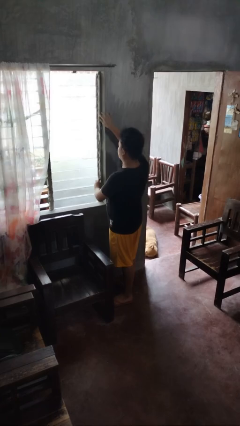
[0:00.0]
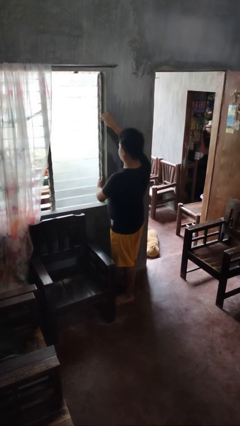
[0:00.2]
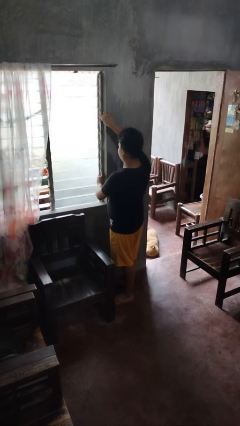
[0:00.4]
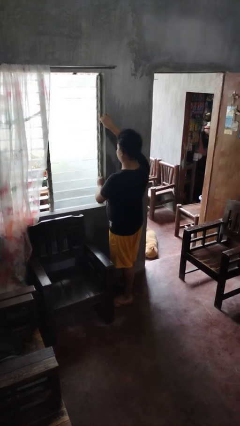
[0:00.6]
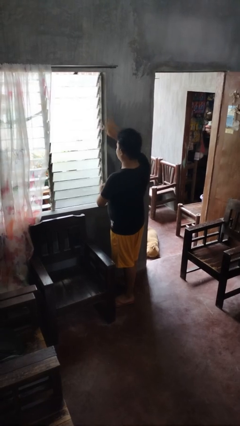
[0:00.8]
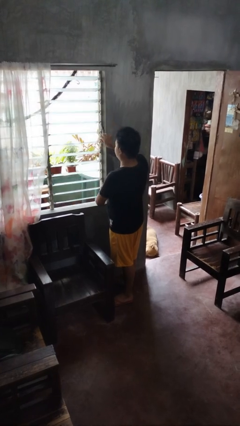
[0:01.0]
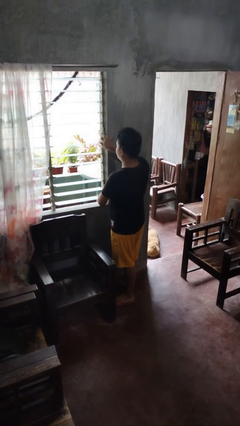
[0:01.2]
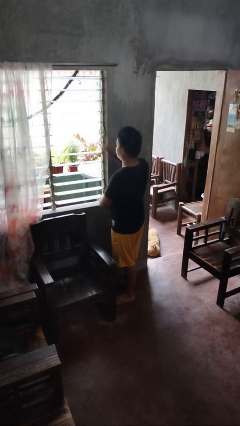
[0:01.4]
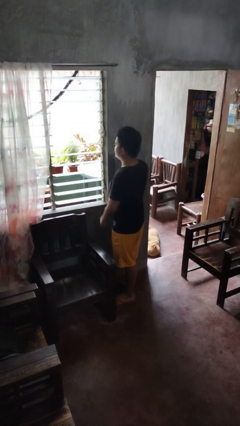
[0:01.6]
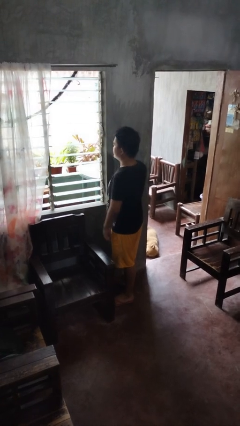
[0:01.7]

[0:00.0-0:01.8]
person opens home window

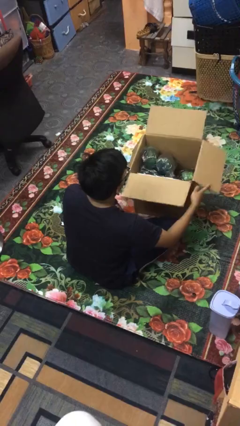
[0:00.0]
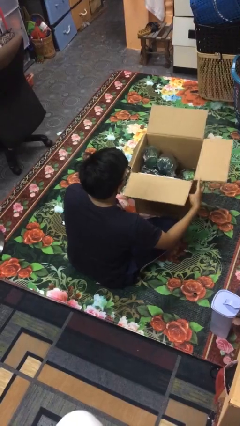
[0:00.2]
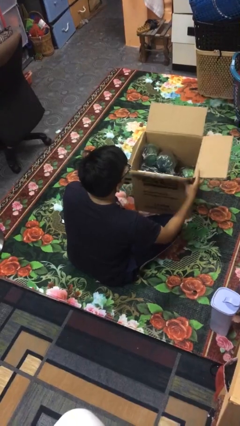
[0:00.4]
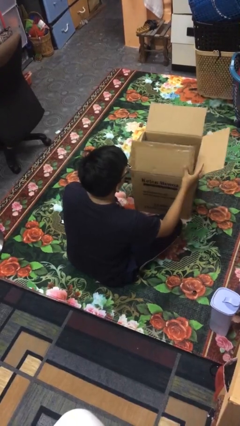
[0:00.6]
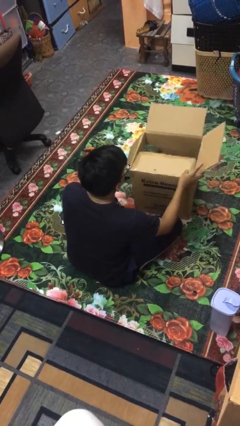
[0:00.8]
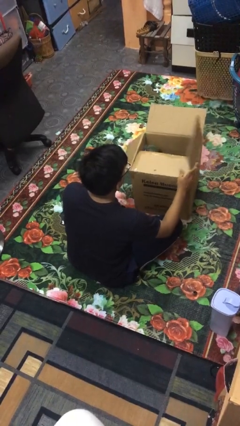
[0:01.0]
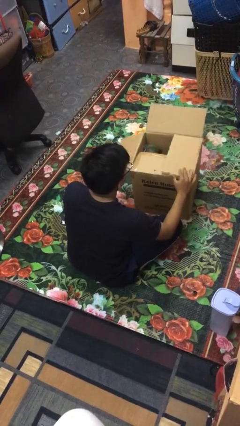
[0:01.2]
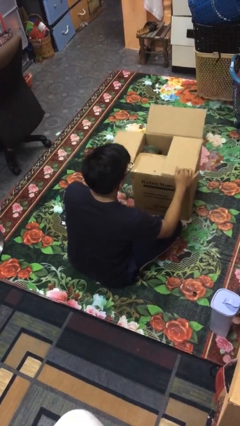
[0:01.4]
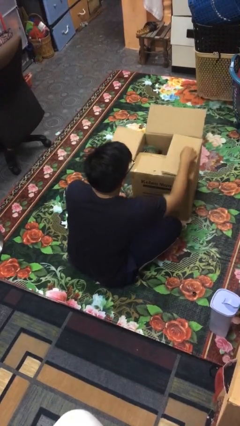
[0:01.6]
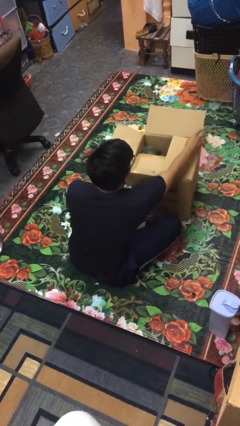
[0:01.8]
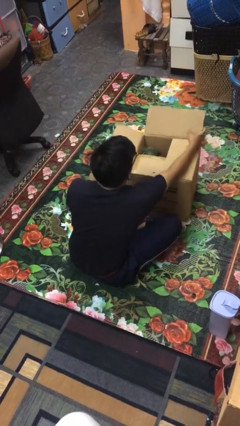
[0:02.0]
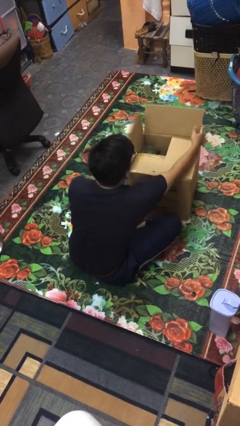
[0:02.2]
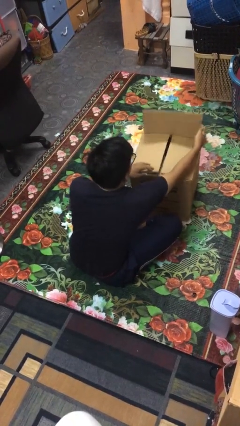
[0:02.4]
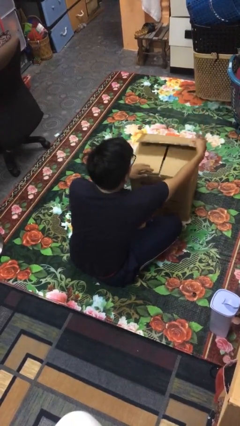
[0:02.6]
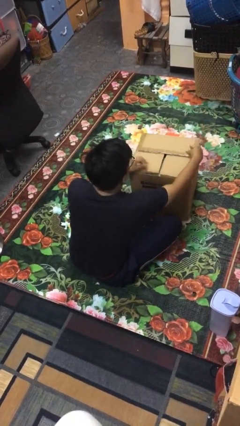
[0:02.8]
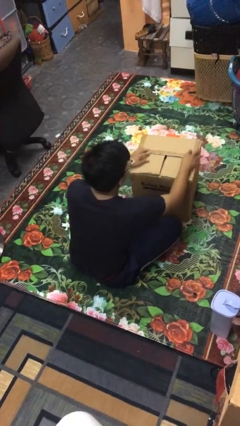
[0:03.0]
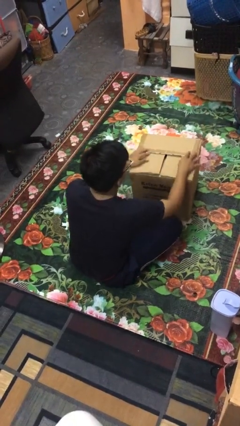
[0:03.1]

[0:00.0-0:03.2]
person closes box

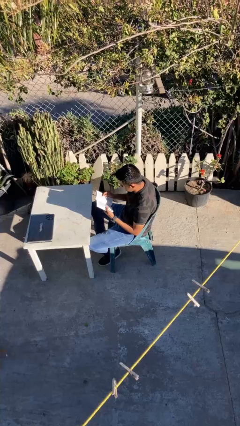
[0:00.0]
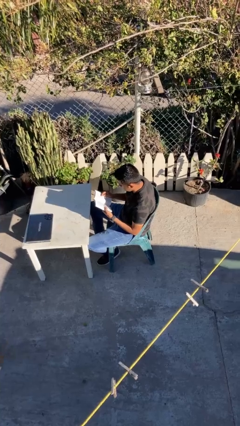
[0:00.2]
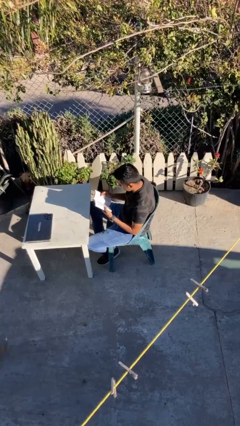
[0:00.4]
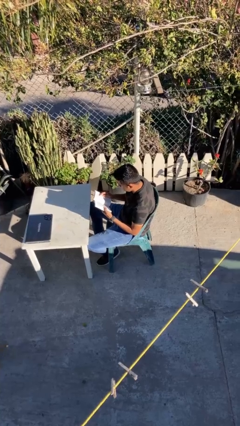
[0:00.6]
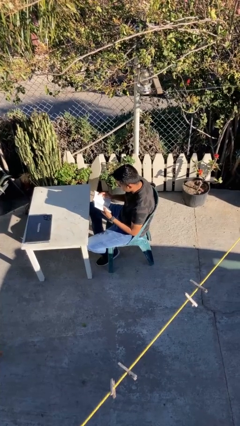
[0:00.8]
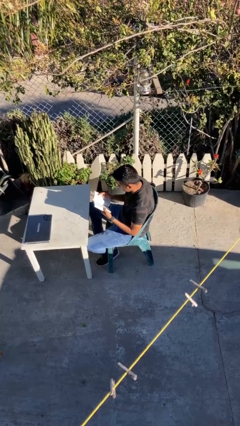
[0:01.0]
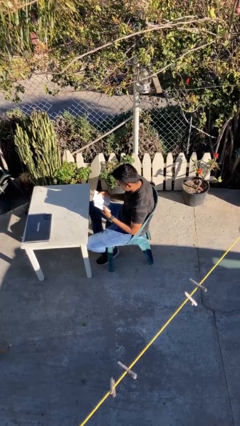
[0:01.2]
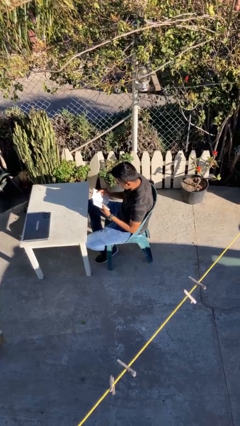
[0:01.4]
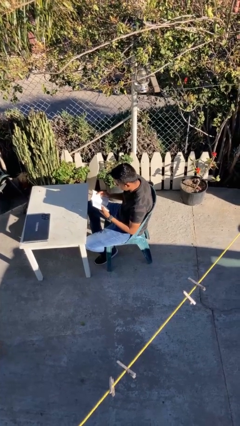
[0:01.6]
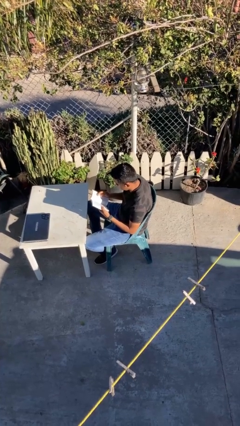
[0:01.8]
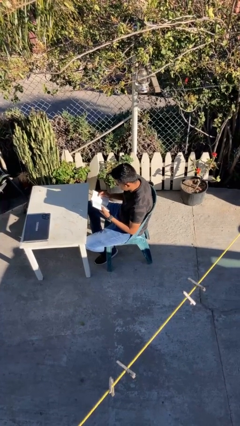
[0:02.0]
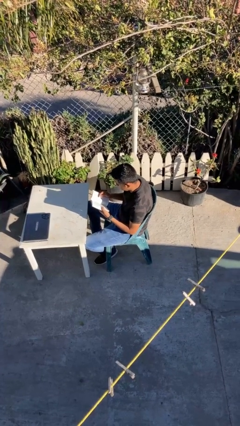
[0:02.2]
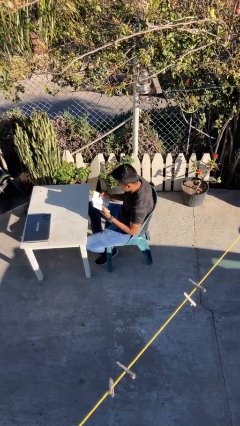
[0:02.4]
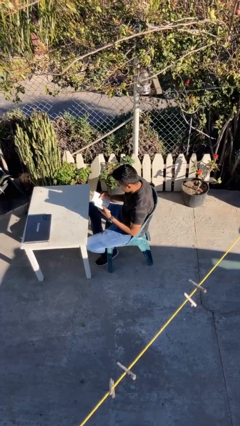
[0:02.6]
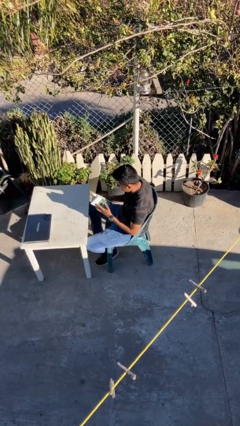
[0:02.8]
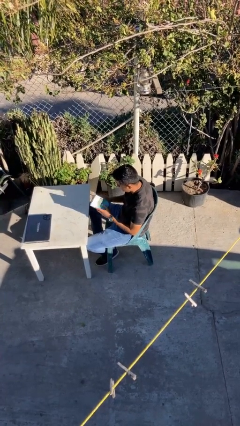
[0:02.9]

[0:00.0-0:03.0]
person reads document

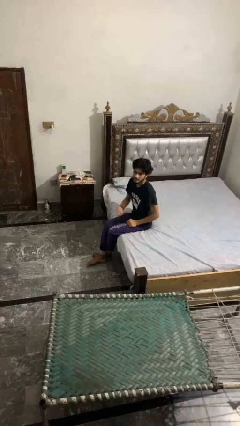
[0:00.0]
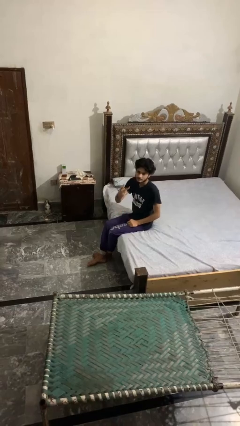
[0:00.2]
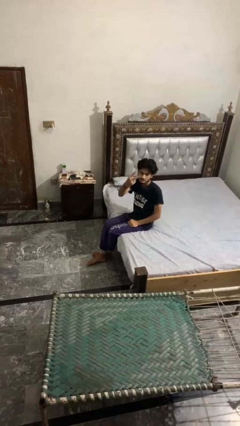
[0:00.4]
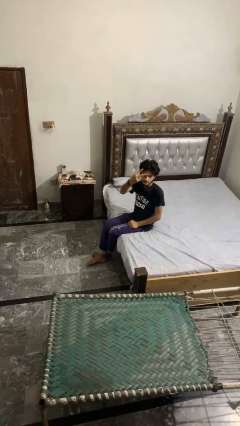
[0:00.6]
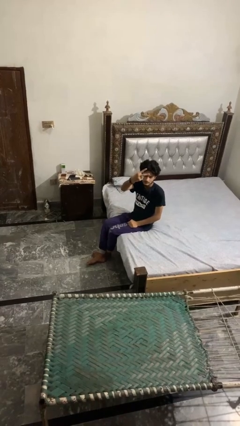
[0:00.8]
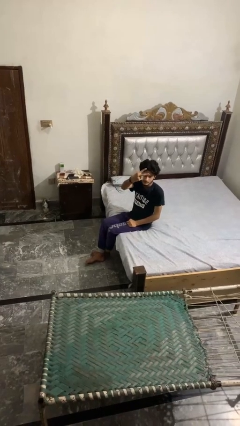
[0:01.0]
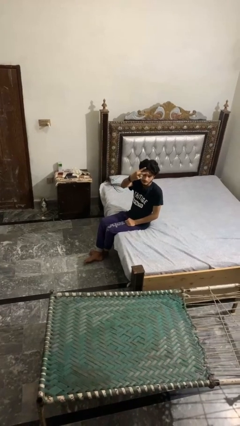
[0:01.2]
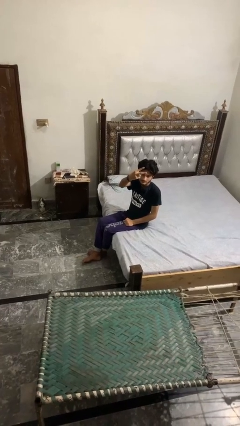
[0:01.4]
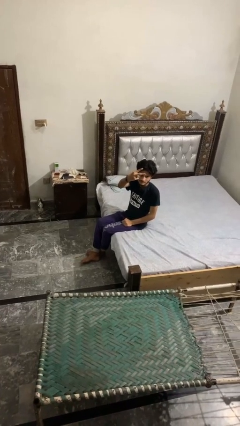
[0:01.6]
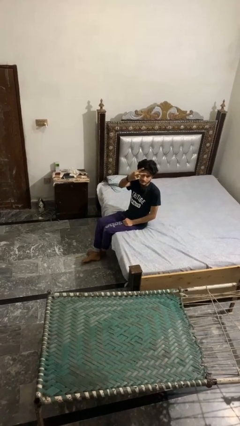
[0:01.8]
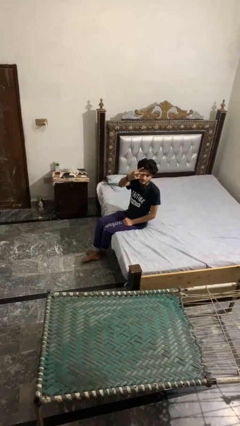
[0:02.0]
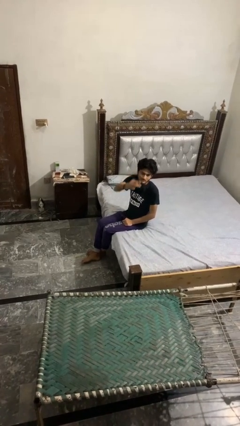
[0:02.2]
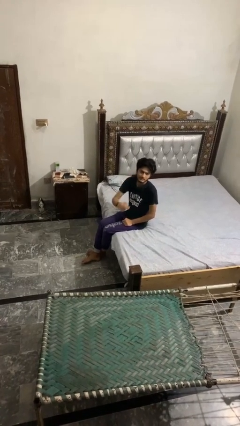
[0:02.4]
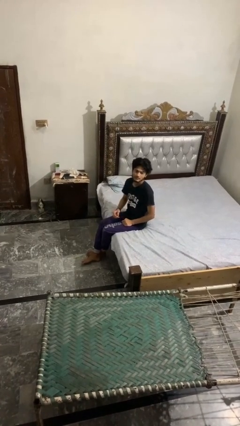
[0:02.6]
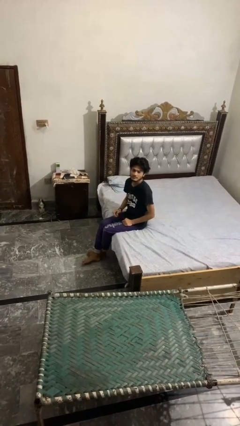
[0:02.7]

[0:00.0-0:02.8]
person gestures peace

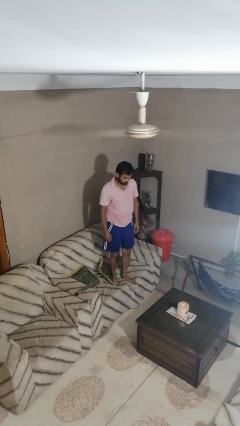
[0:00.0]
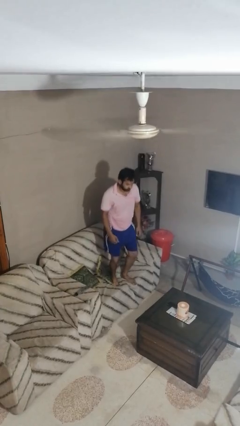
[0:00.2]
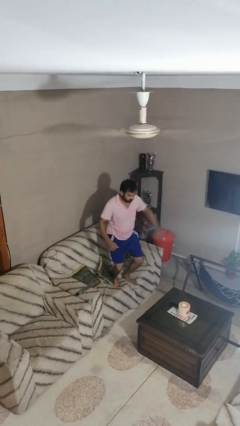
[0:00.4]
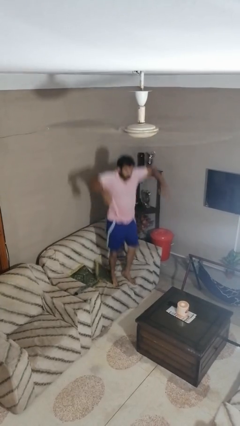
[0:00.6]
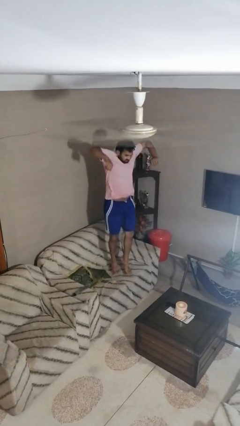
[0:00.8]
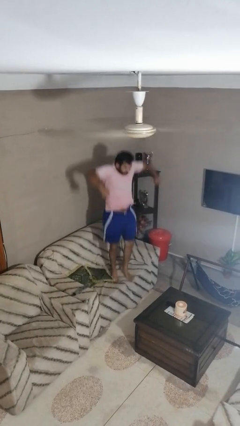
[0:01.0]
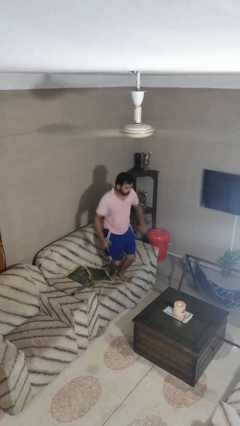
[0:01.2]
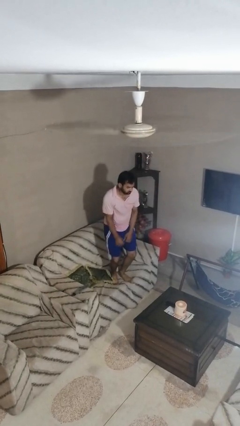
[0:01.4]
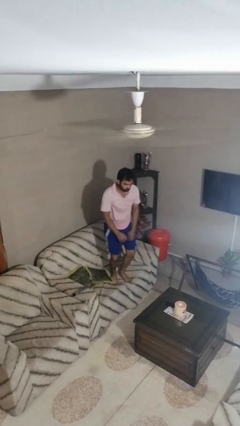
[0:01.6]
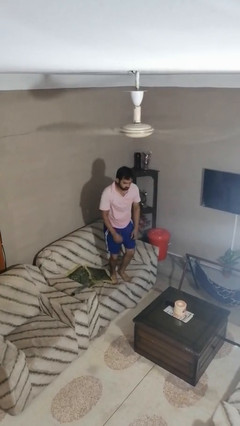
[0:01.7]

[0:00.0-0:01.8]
person jumps on couch

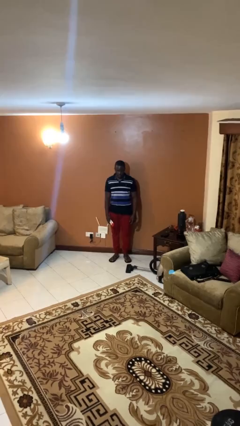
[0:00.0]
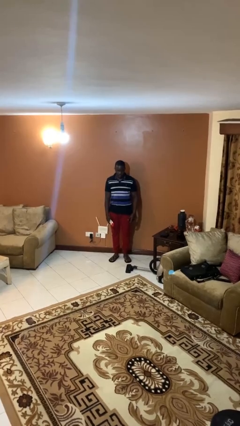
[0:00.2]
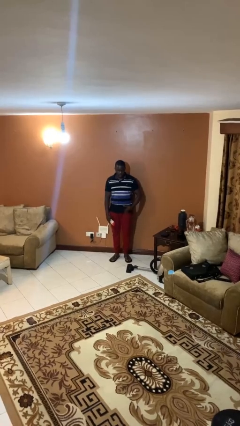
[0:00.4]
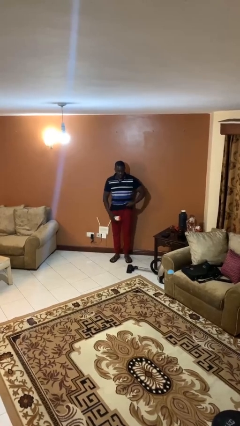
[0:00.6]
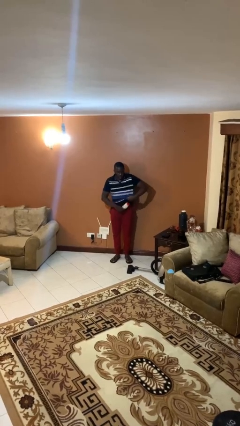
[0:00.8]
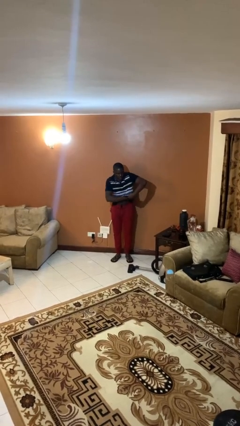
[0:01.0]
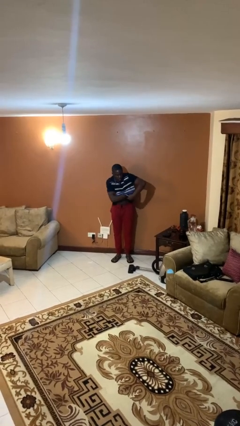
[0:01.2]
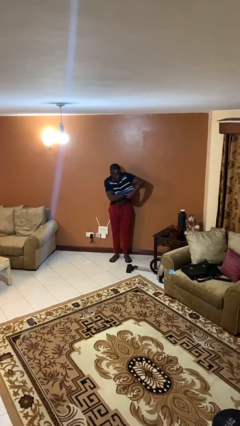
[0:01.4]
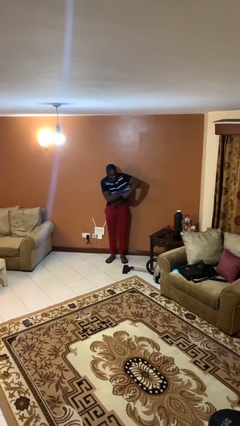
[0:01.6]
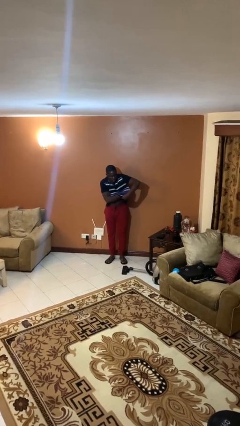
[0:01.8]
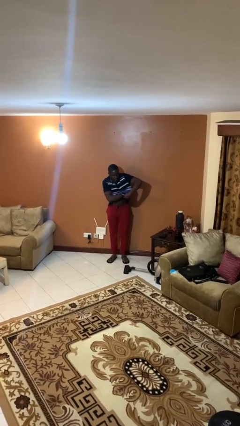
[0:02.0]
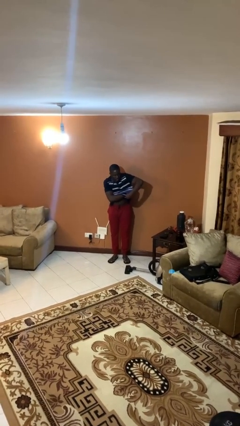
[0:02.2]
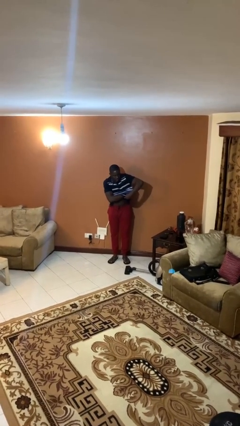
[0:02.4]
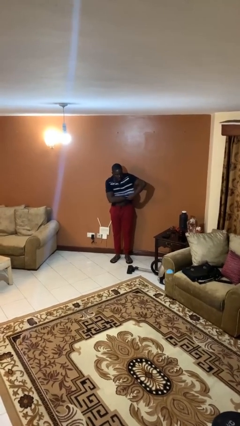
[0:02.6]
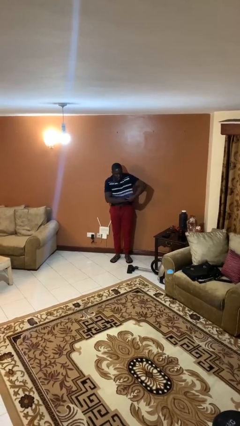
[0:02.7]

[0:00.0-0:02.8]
person applies deodorant

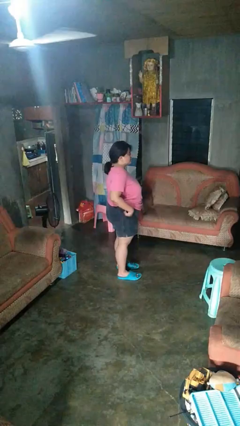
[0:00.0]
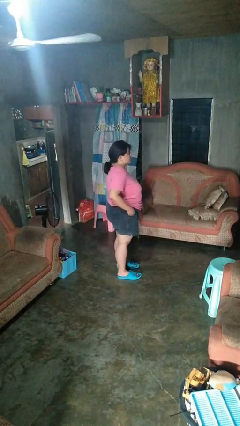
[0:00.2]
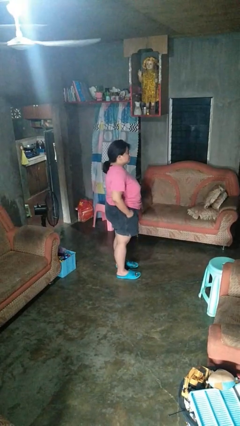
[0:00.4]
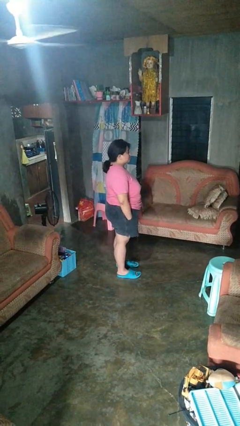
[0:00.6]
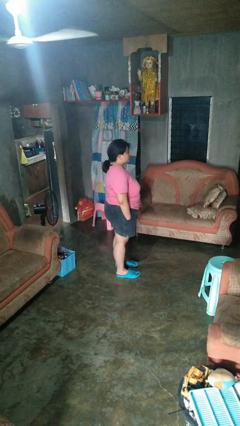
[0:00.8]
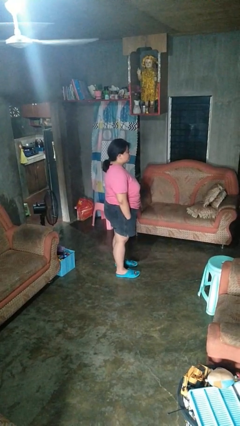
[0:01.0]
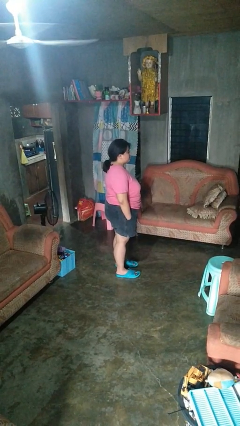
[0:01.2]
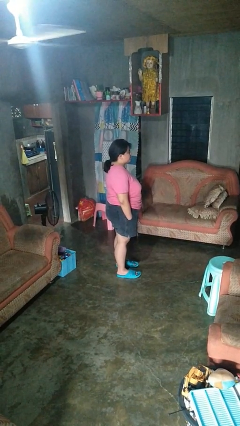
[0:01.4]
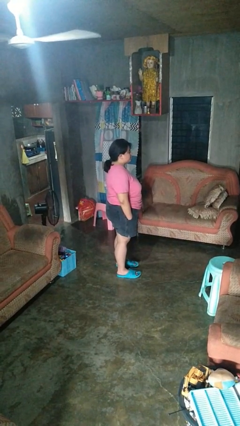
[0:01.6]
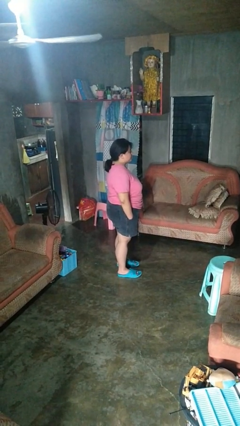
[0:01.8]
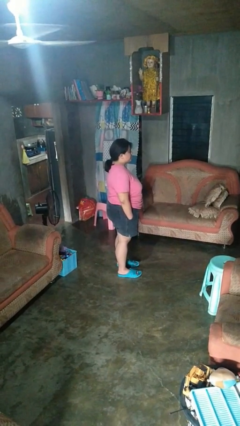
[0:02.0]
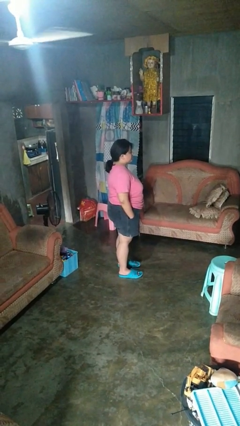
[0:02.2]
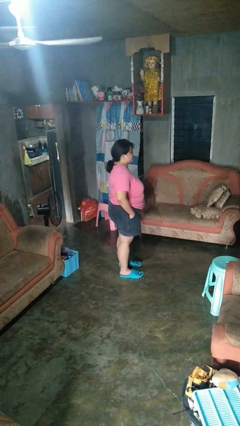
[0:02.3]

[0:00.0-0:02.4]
person puts hands in back pockets
